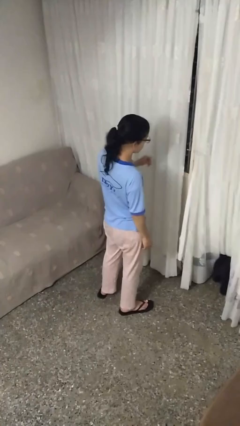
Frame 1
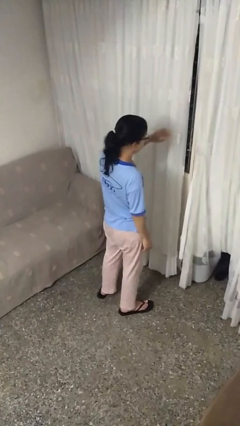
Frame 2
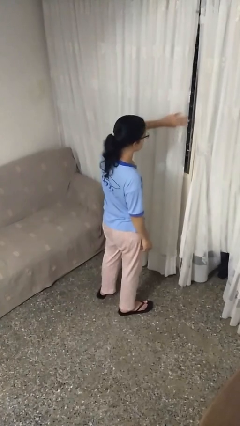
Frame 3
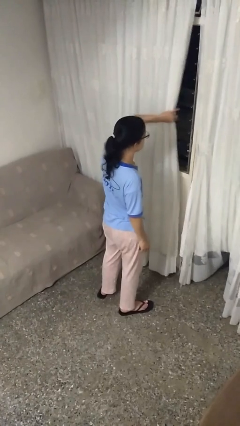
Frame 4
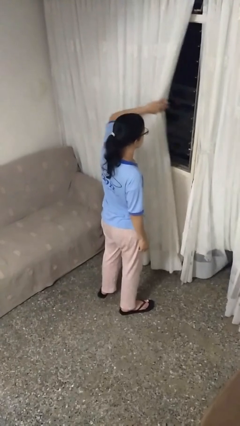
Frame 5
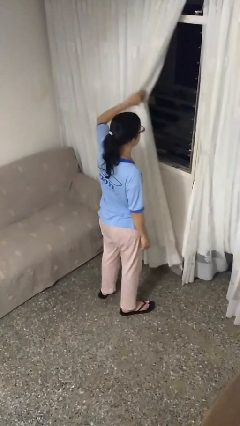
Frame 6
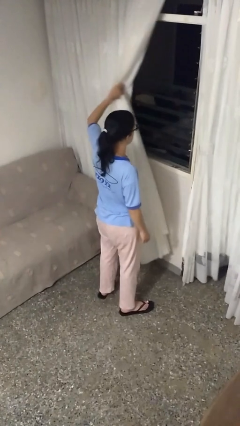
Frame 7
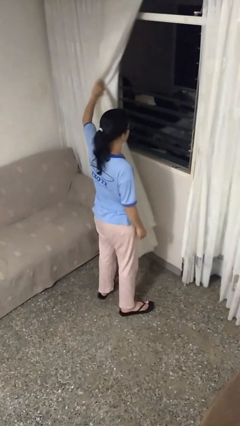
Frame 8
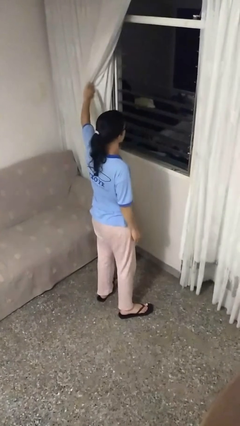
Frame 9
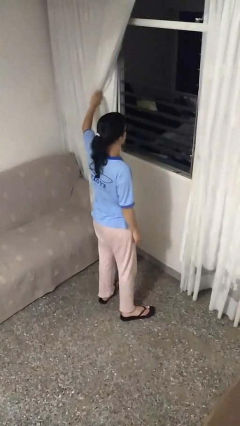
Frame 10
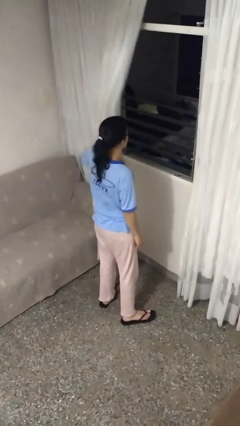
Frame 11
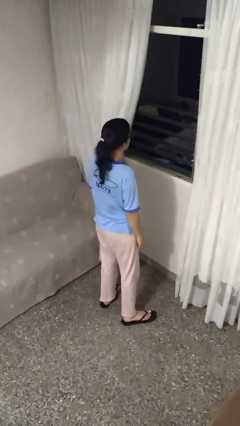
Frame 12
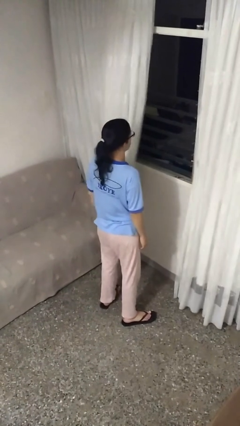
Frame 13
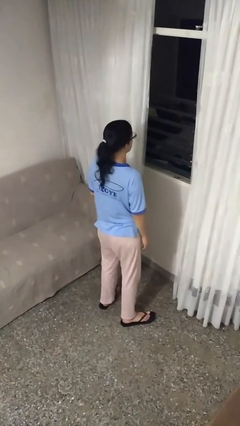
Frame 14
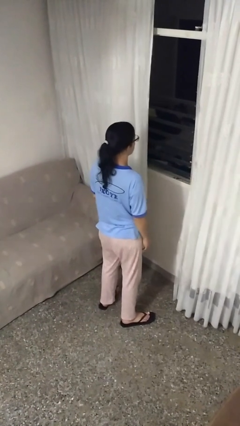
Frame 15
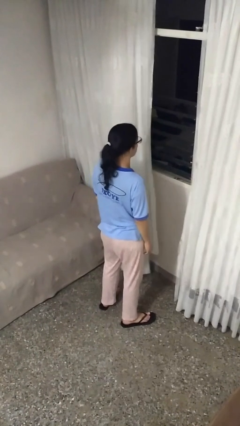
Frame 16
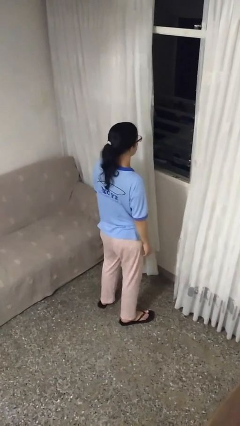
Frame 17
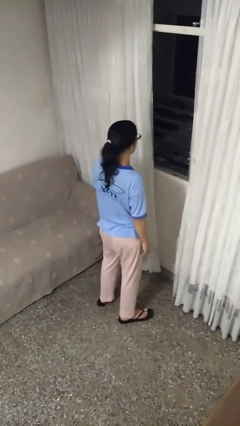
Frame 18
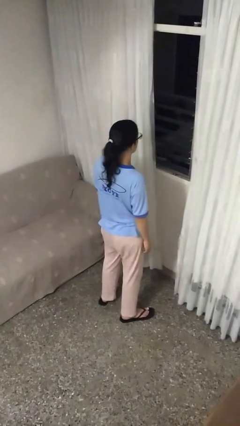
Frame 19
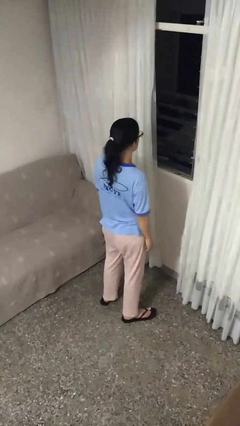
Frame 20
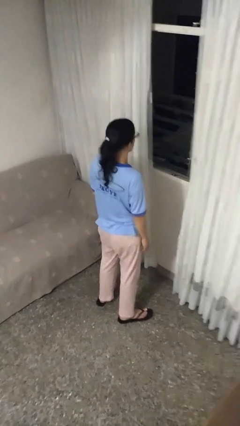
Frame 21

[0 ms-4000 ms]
person opens curtains

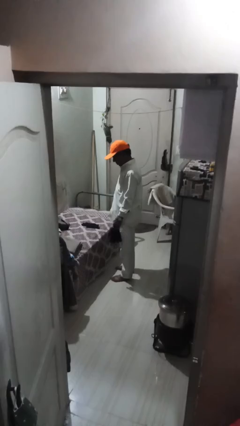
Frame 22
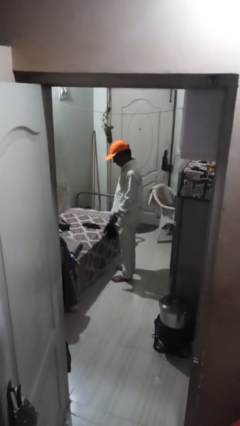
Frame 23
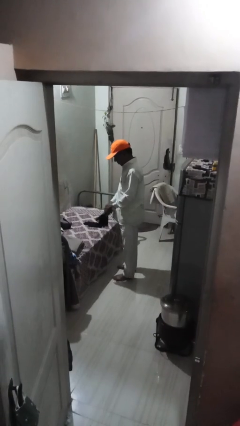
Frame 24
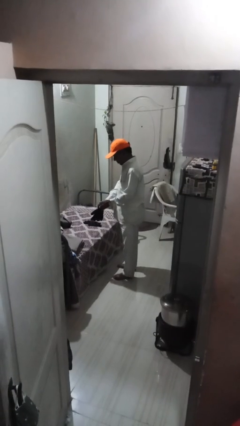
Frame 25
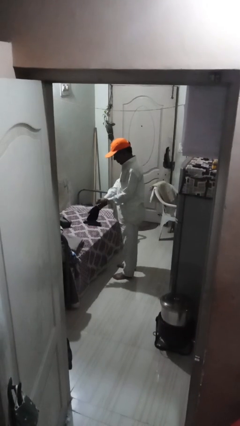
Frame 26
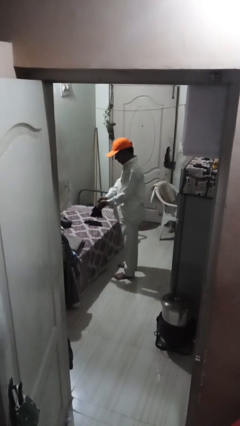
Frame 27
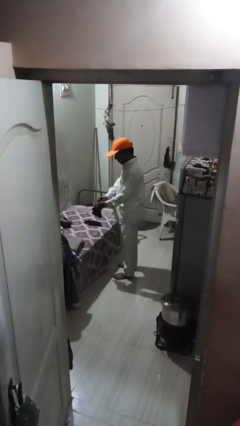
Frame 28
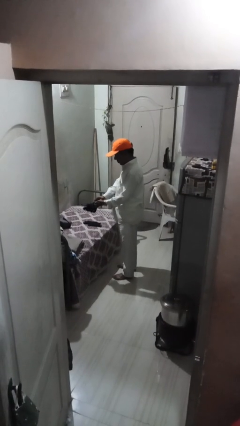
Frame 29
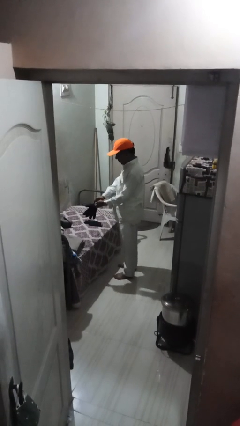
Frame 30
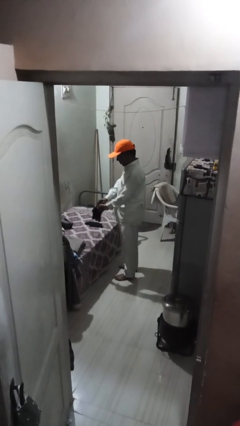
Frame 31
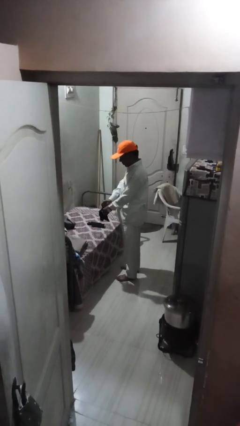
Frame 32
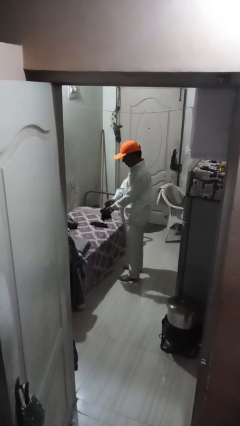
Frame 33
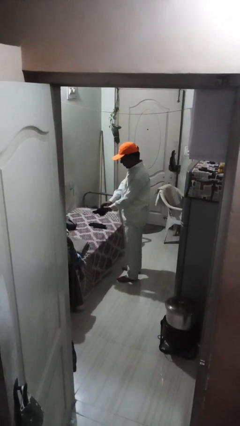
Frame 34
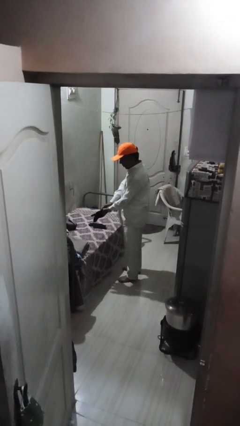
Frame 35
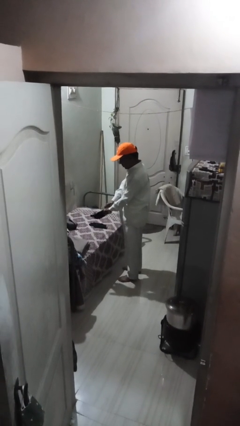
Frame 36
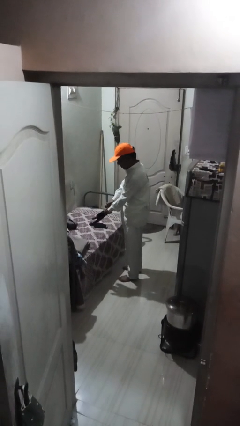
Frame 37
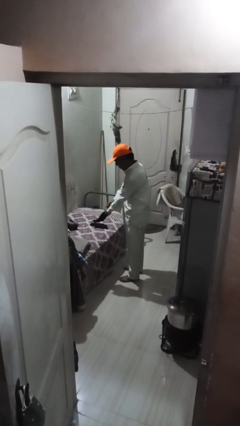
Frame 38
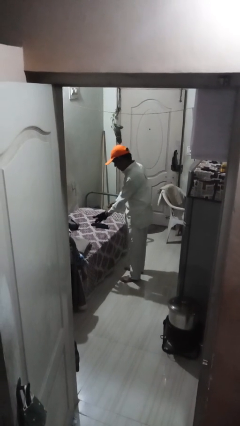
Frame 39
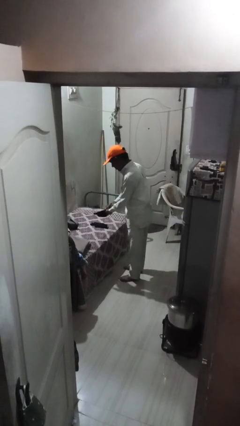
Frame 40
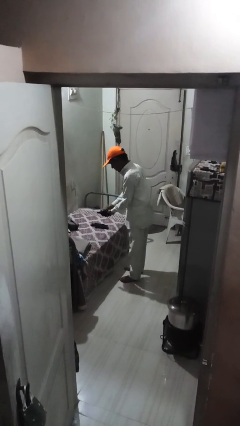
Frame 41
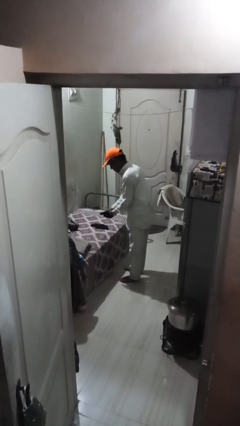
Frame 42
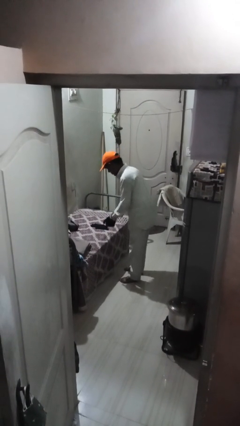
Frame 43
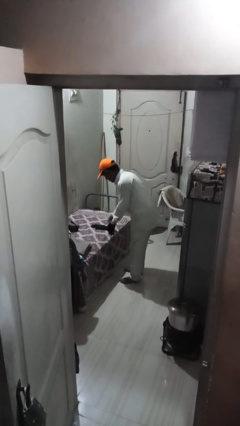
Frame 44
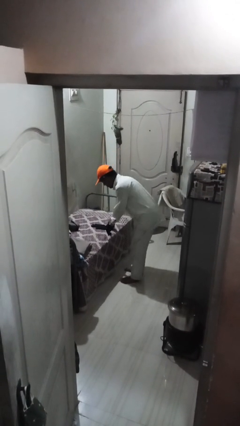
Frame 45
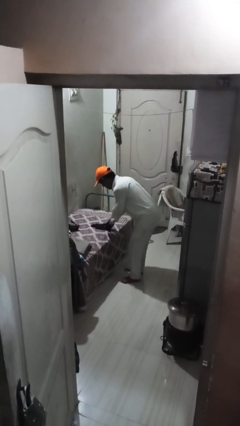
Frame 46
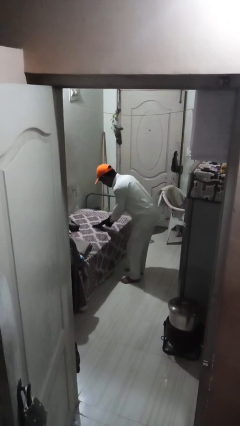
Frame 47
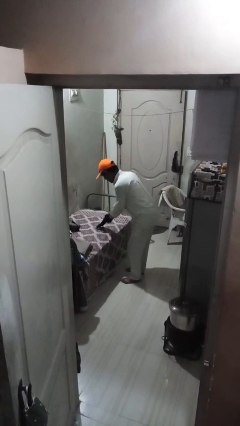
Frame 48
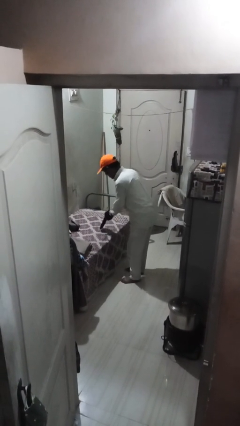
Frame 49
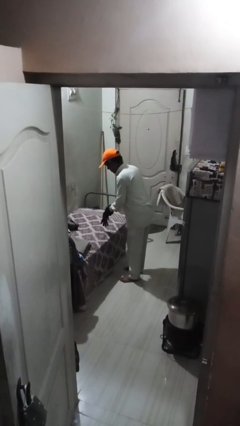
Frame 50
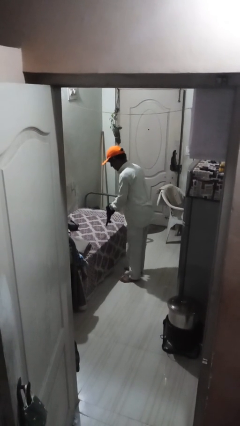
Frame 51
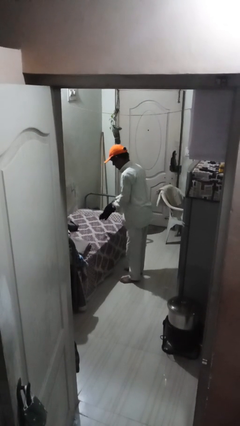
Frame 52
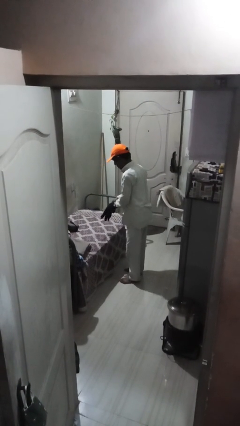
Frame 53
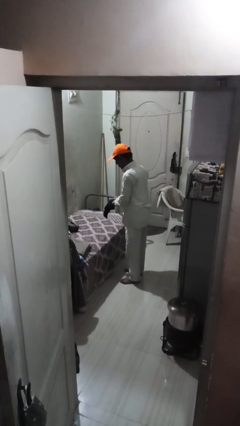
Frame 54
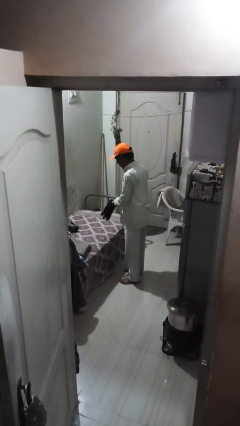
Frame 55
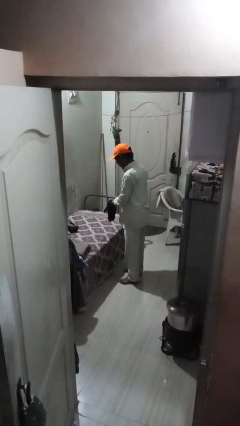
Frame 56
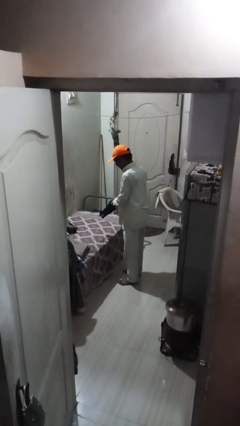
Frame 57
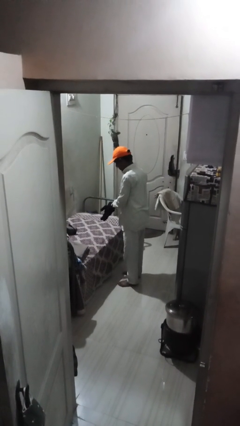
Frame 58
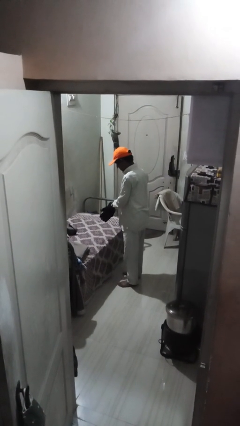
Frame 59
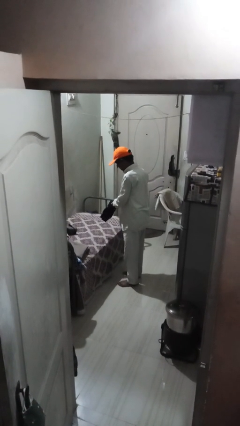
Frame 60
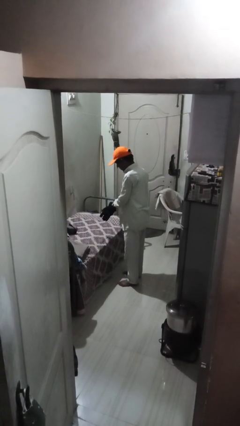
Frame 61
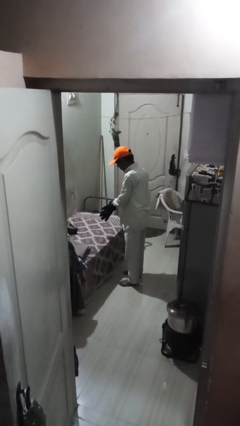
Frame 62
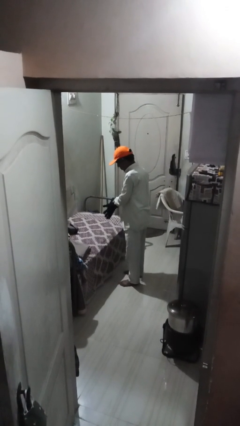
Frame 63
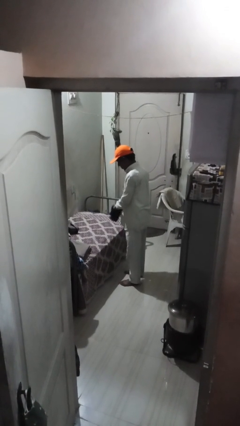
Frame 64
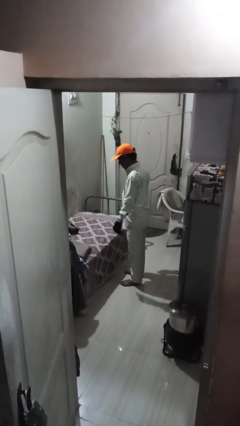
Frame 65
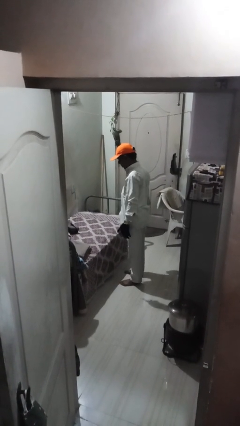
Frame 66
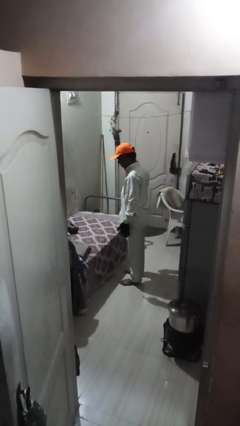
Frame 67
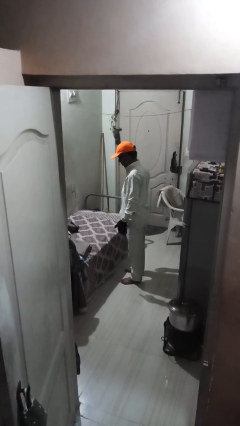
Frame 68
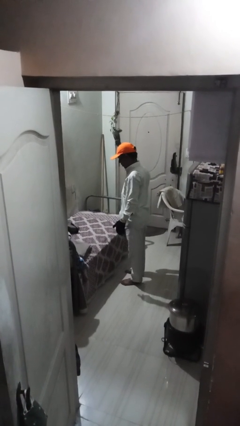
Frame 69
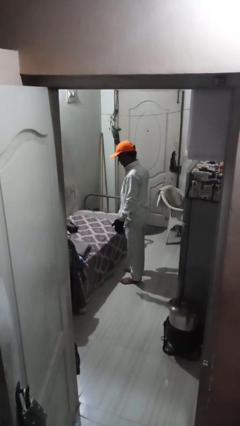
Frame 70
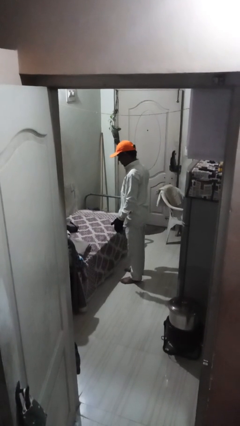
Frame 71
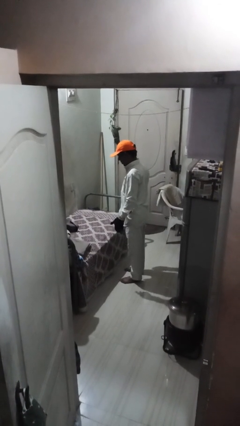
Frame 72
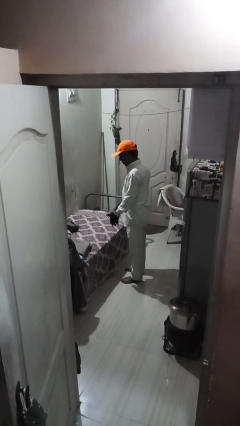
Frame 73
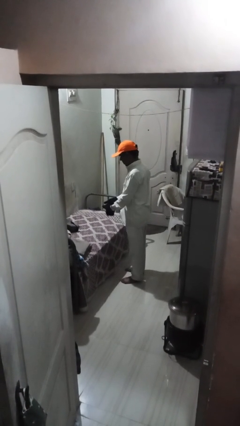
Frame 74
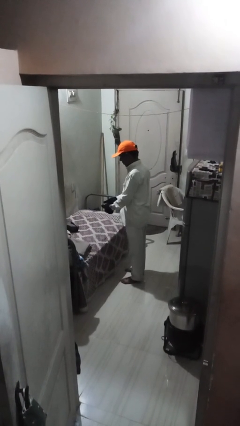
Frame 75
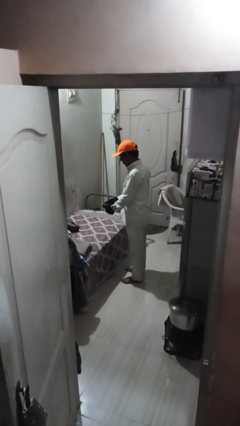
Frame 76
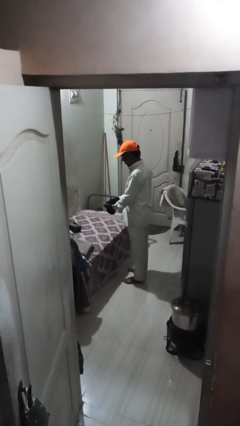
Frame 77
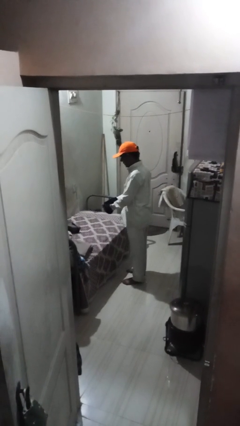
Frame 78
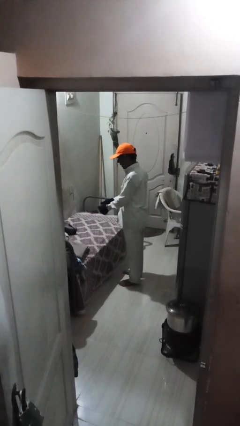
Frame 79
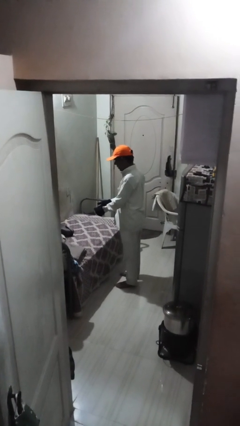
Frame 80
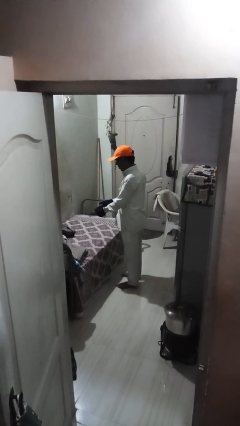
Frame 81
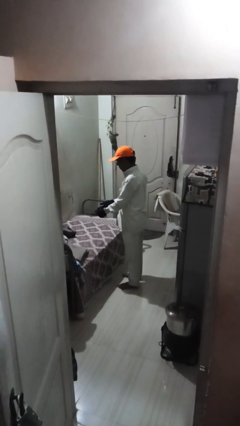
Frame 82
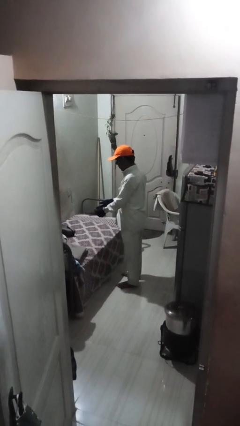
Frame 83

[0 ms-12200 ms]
person puts on gloves

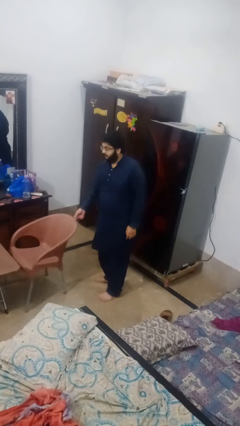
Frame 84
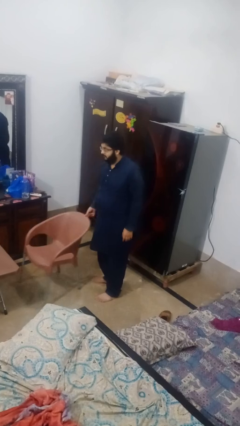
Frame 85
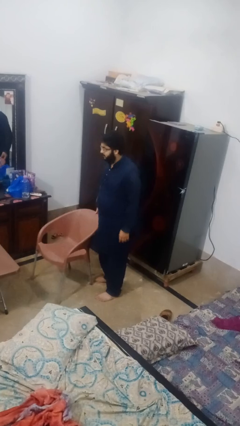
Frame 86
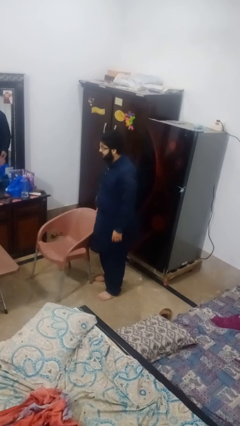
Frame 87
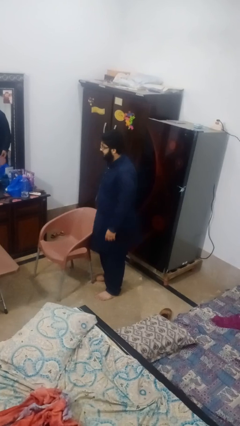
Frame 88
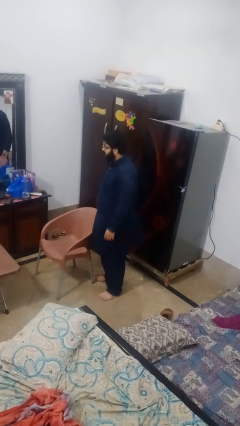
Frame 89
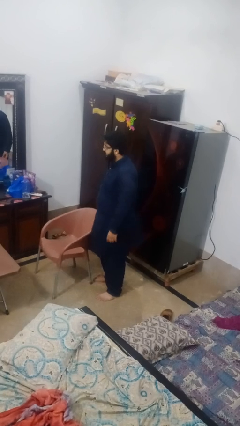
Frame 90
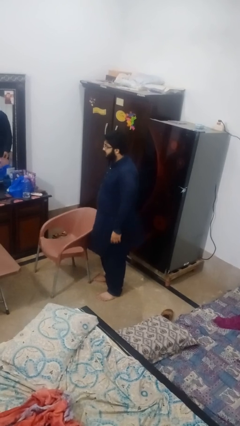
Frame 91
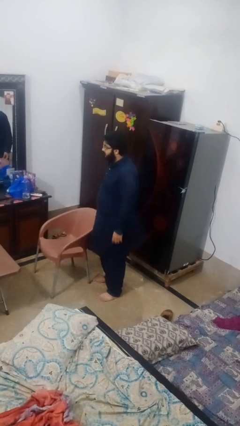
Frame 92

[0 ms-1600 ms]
person pulls out chair

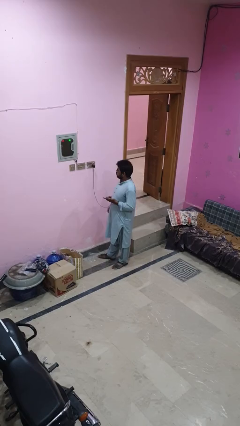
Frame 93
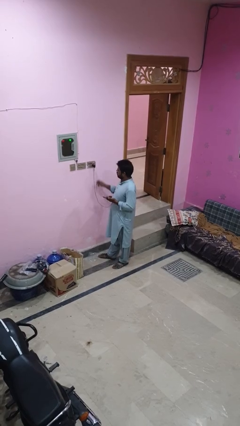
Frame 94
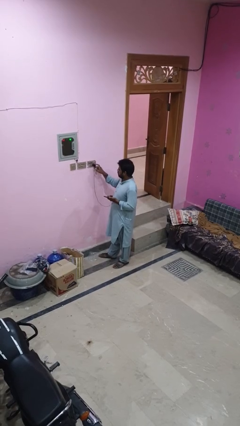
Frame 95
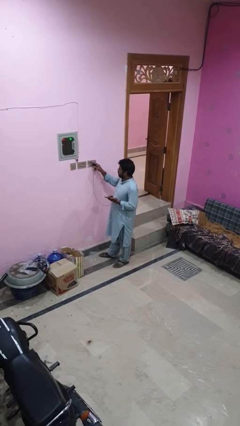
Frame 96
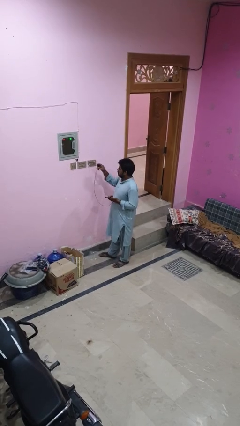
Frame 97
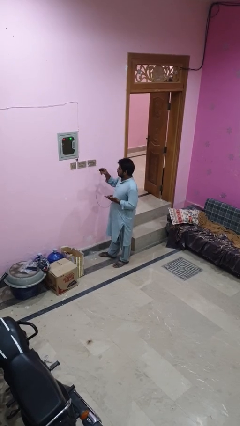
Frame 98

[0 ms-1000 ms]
person unplugs from electrical socket
